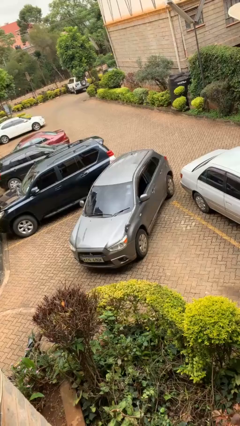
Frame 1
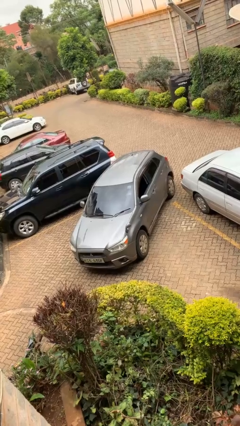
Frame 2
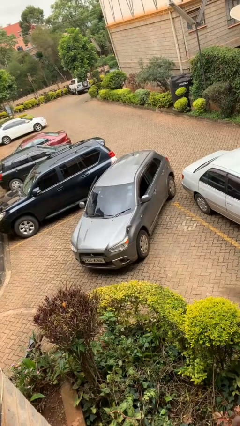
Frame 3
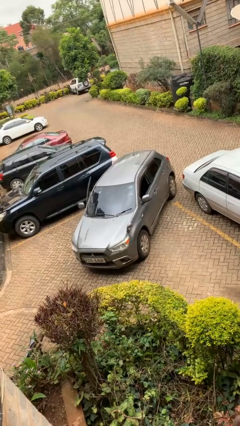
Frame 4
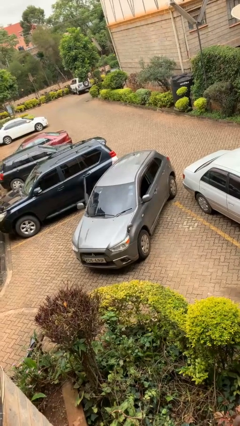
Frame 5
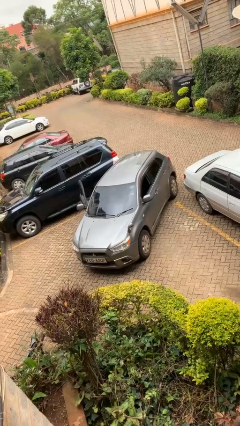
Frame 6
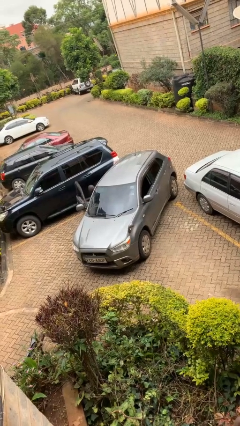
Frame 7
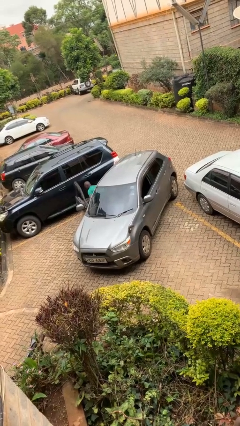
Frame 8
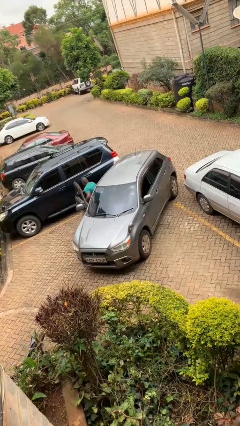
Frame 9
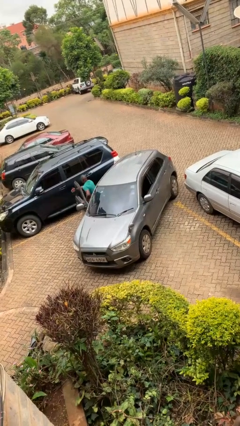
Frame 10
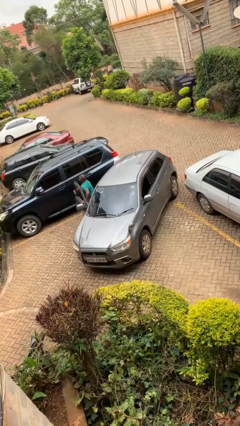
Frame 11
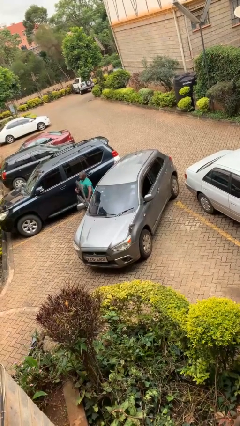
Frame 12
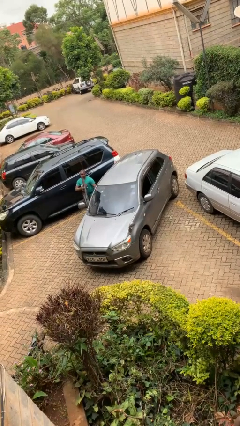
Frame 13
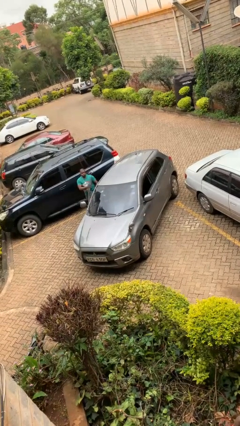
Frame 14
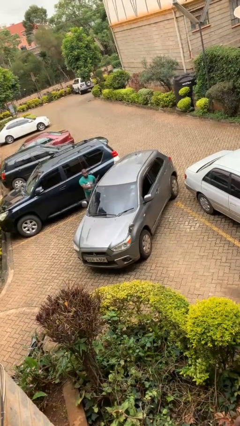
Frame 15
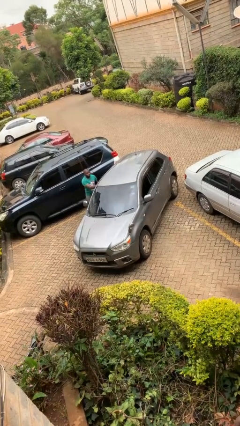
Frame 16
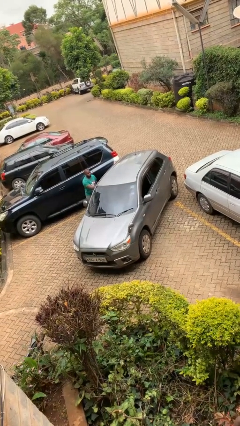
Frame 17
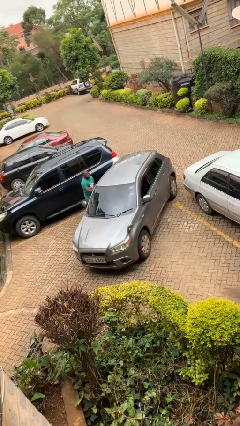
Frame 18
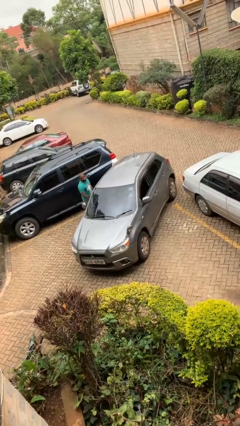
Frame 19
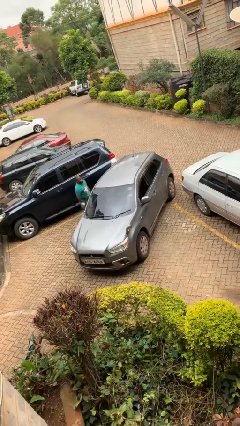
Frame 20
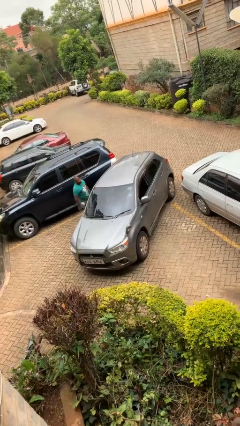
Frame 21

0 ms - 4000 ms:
car drops off person

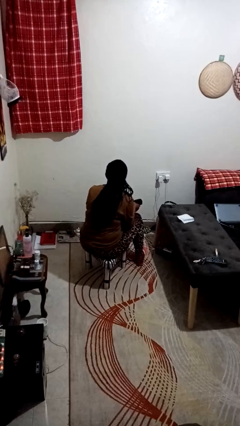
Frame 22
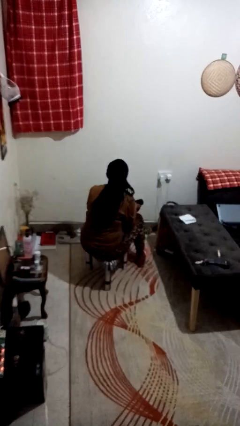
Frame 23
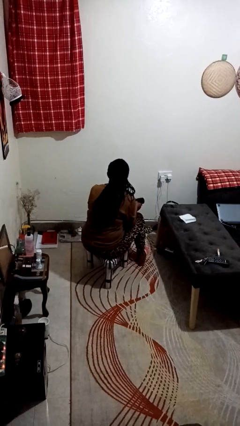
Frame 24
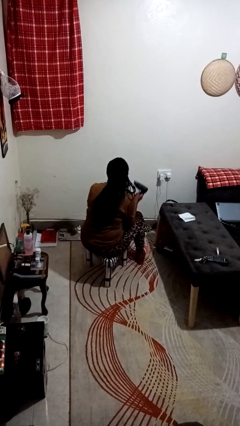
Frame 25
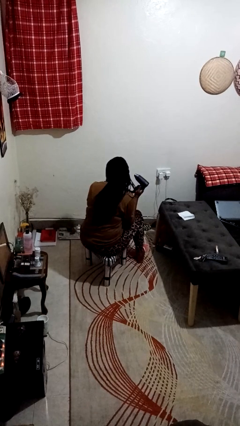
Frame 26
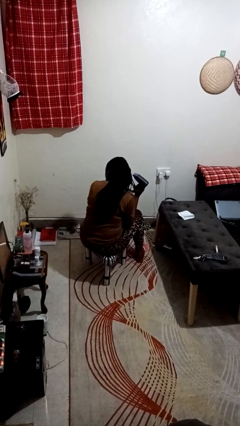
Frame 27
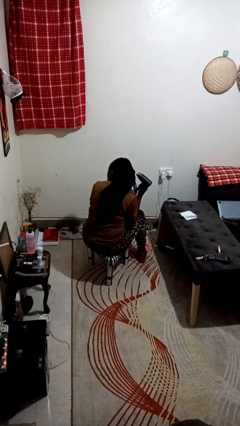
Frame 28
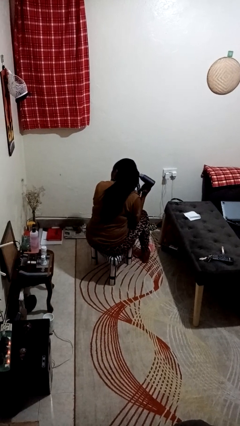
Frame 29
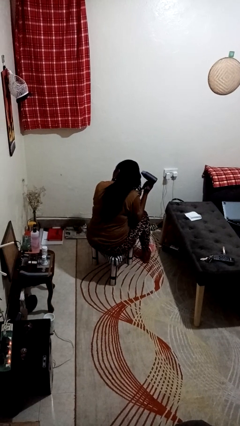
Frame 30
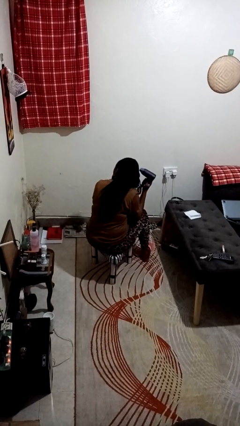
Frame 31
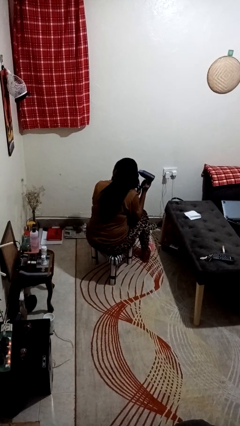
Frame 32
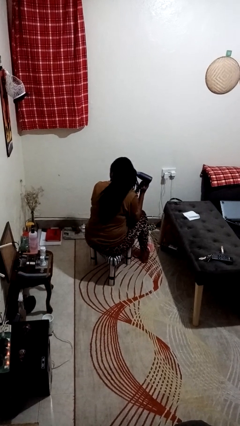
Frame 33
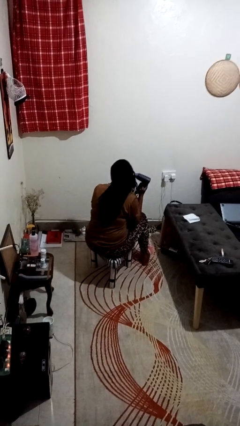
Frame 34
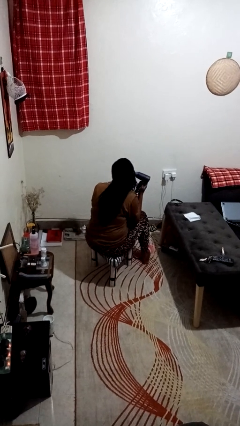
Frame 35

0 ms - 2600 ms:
person dries hair with hairdryer

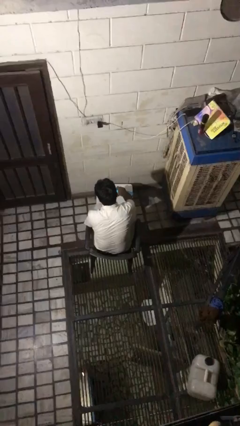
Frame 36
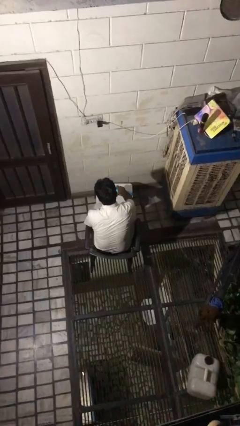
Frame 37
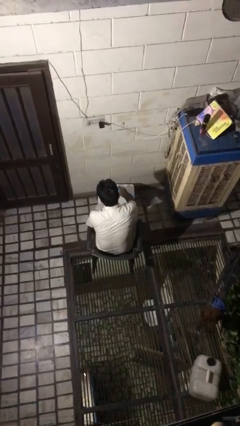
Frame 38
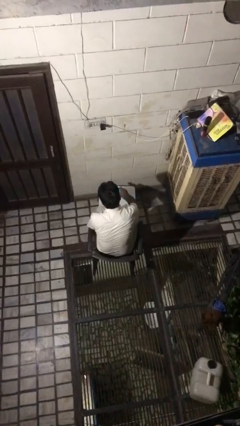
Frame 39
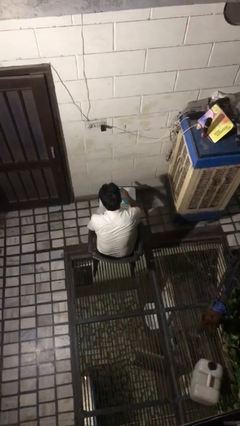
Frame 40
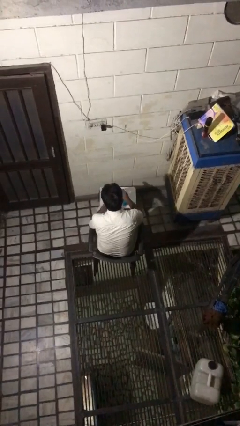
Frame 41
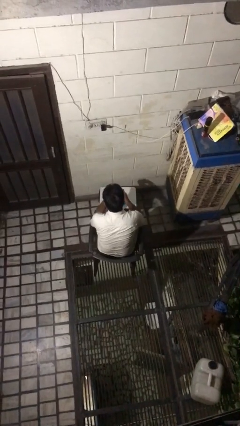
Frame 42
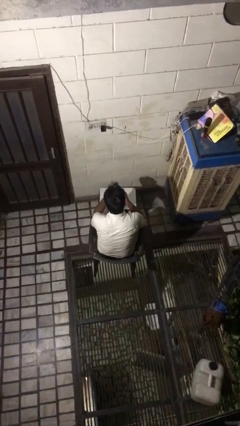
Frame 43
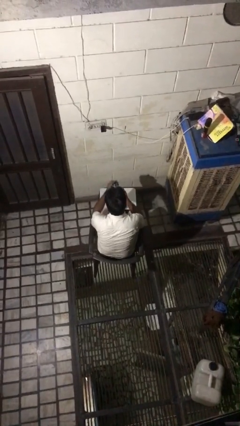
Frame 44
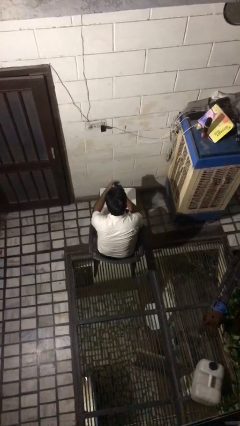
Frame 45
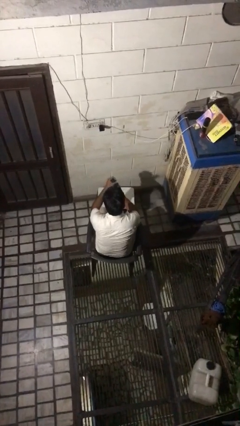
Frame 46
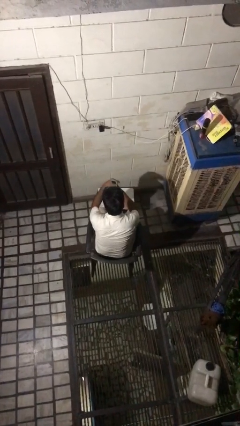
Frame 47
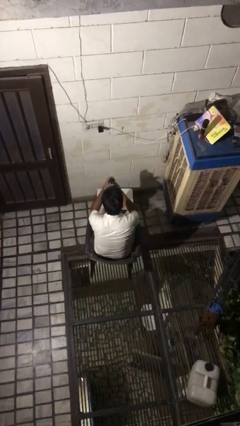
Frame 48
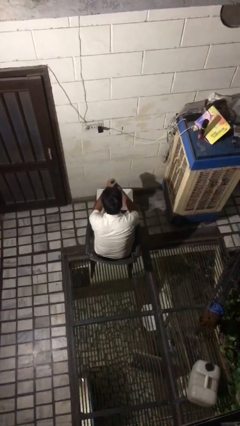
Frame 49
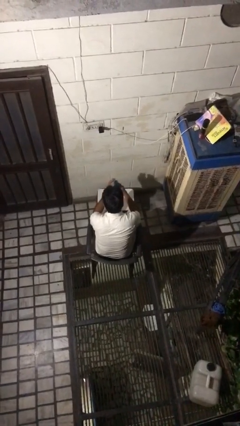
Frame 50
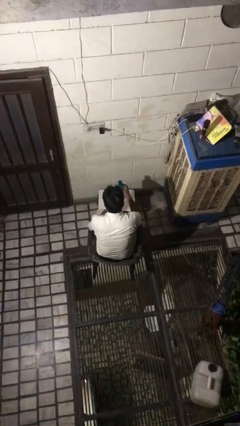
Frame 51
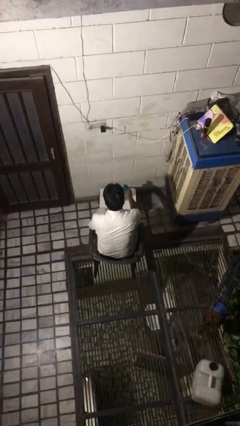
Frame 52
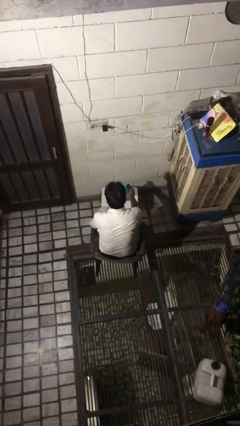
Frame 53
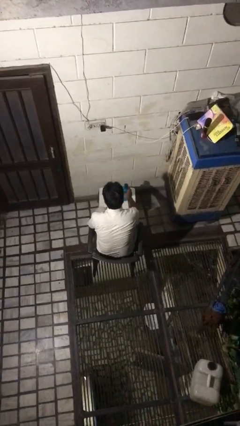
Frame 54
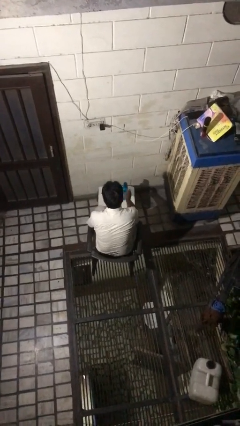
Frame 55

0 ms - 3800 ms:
person screws lid to bottle

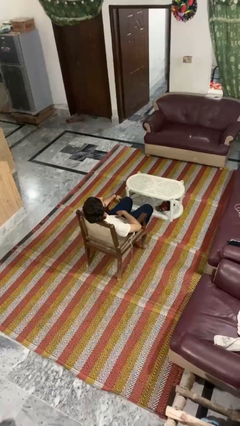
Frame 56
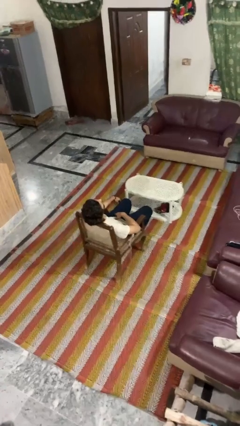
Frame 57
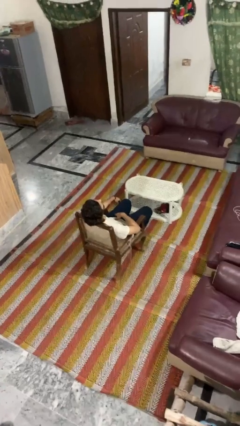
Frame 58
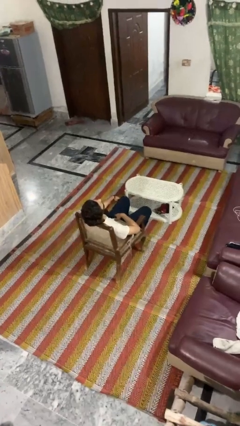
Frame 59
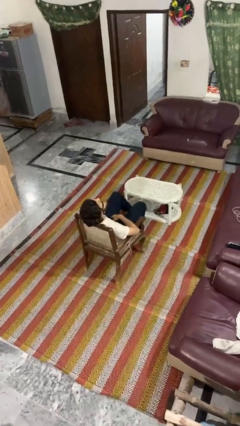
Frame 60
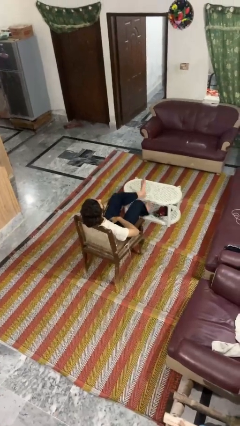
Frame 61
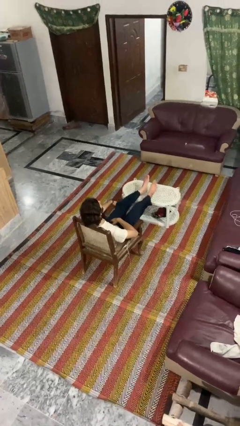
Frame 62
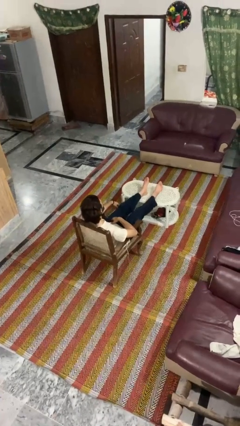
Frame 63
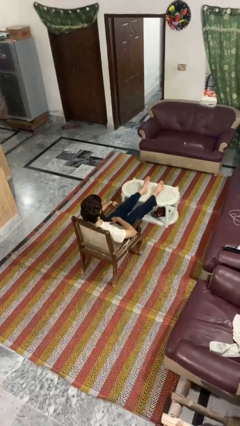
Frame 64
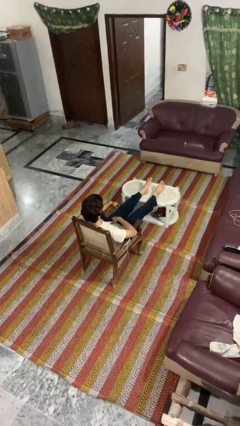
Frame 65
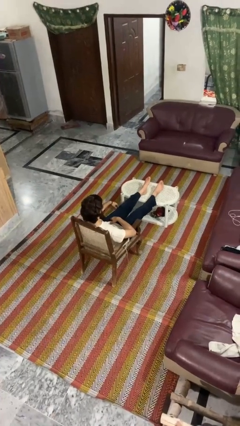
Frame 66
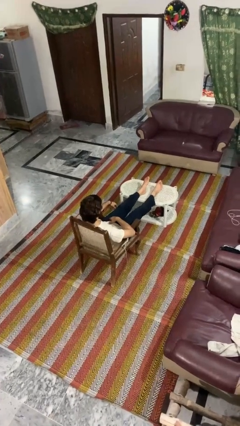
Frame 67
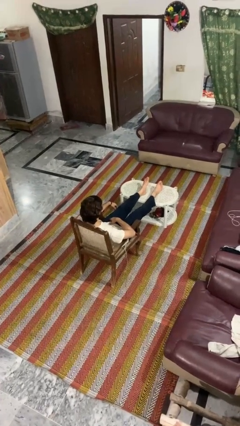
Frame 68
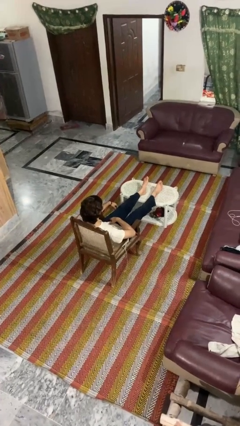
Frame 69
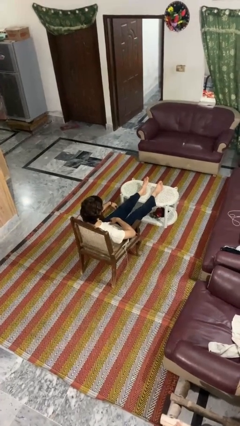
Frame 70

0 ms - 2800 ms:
person puts feet up

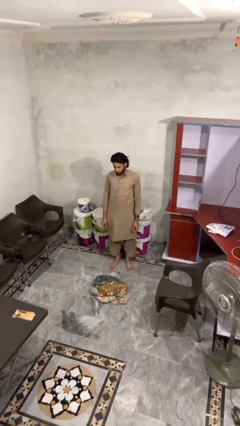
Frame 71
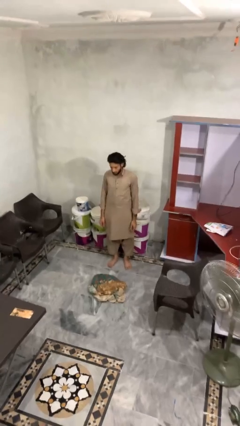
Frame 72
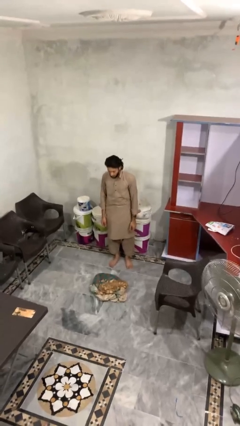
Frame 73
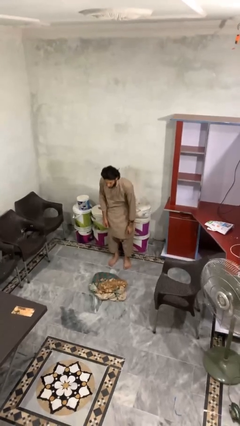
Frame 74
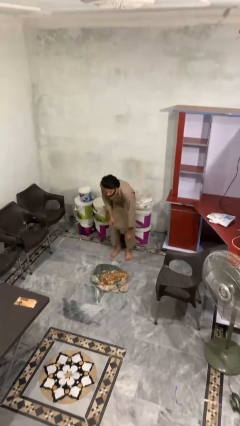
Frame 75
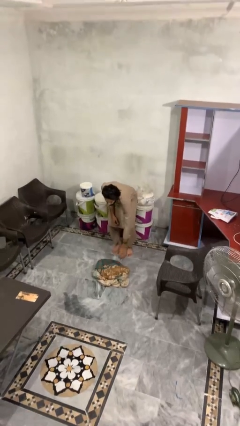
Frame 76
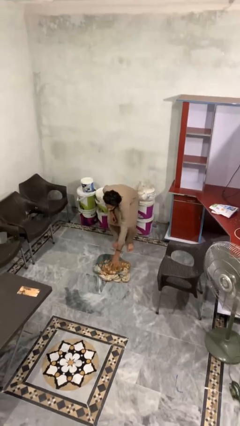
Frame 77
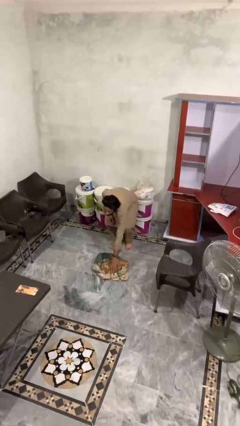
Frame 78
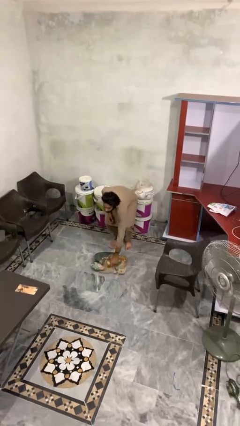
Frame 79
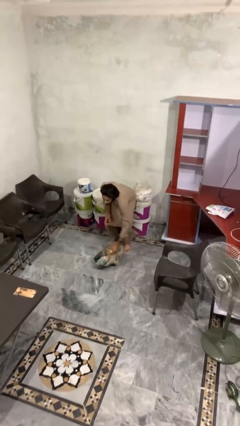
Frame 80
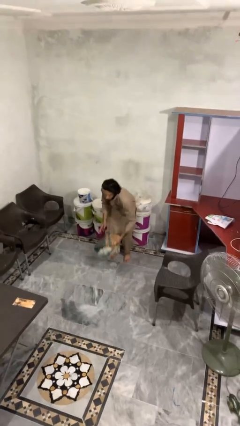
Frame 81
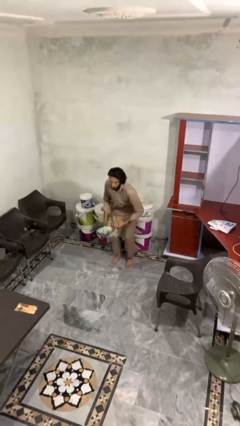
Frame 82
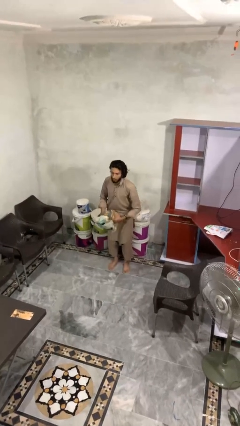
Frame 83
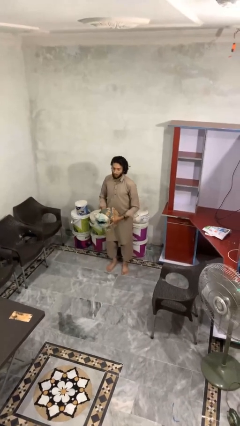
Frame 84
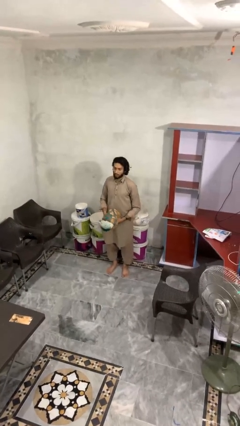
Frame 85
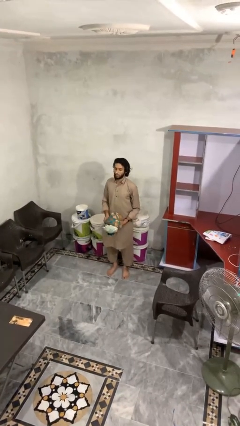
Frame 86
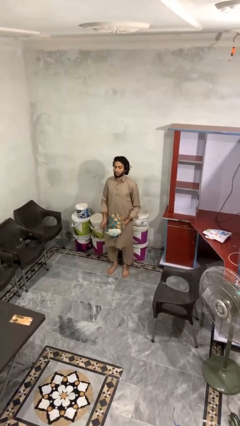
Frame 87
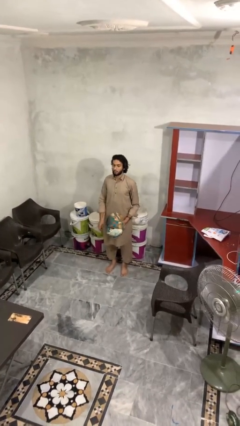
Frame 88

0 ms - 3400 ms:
person picks up object from floor

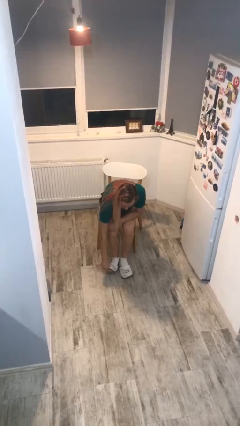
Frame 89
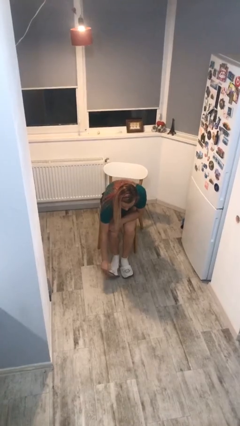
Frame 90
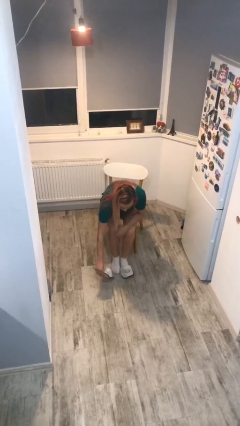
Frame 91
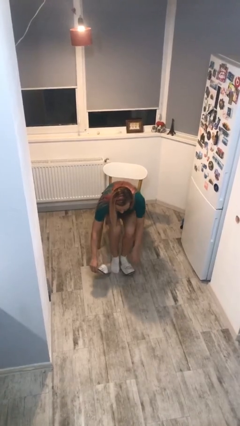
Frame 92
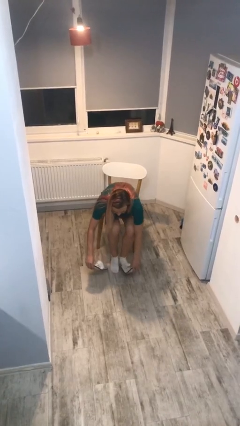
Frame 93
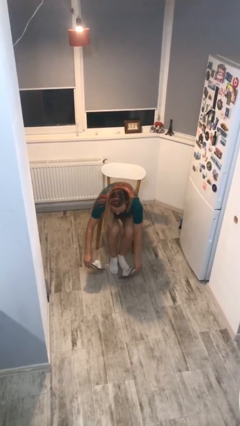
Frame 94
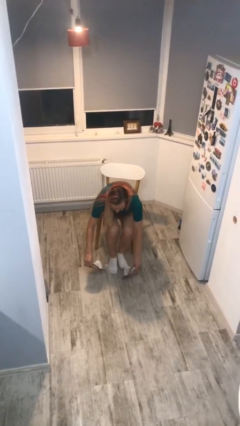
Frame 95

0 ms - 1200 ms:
person takes off shoes
